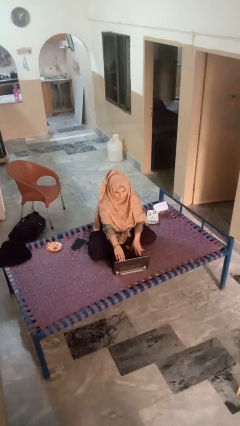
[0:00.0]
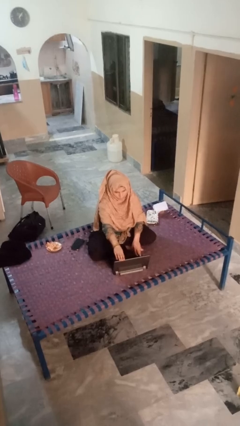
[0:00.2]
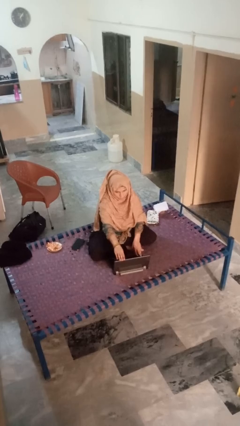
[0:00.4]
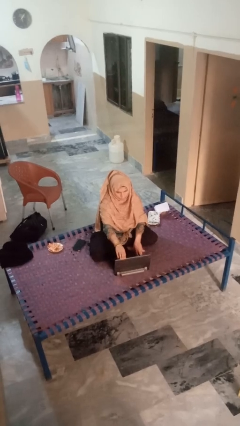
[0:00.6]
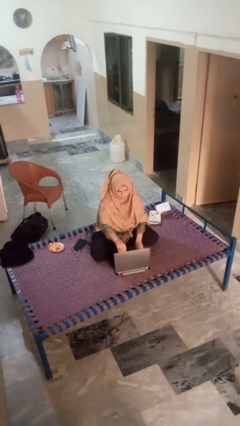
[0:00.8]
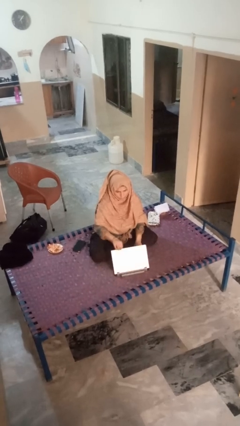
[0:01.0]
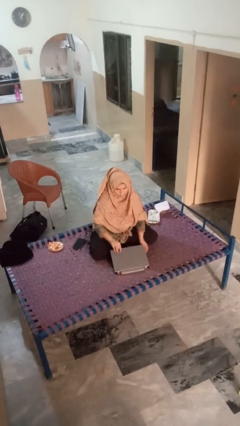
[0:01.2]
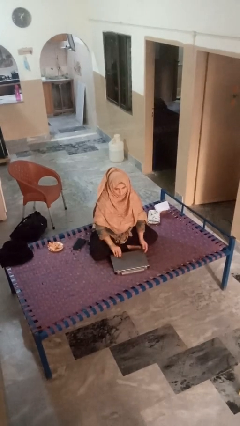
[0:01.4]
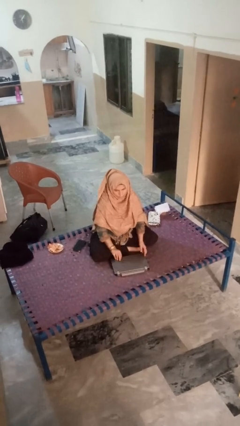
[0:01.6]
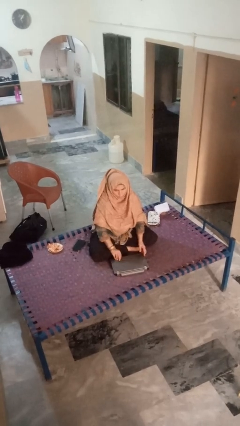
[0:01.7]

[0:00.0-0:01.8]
person closes laptop

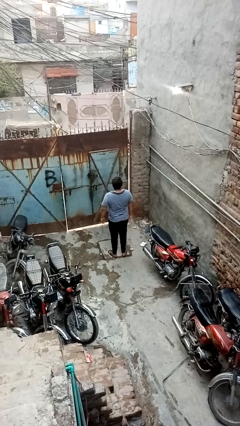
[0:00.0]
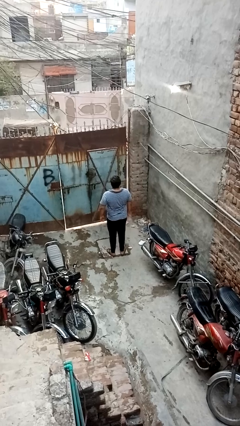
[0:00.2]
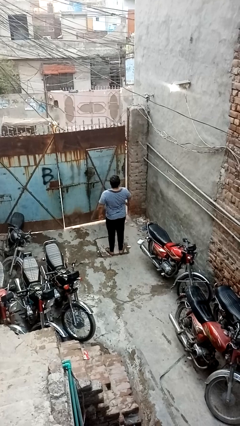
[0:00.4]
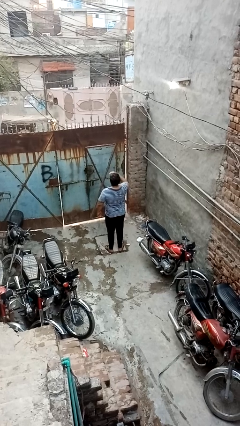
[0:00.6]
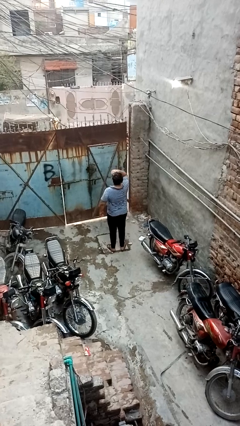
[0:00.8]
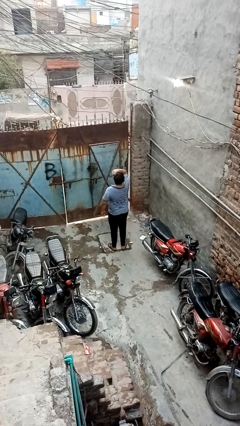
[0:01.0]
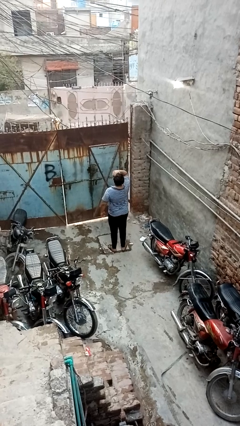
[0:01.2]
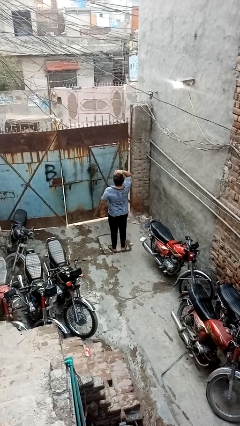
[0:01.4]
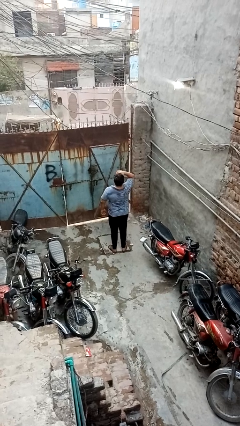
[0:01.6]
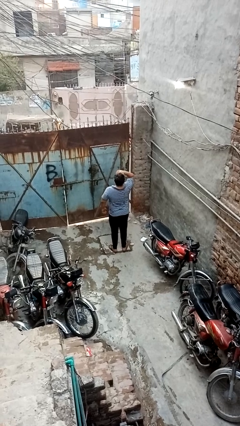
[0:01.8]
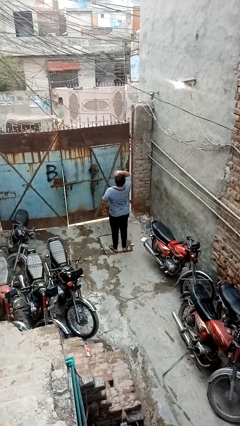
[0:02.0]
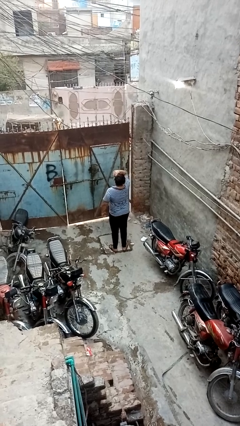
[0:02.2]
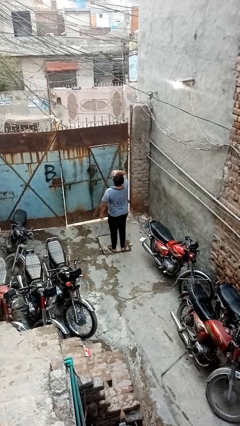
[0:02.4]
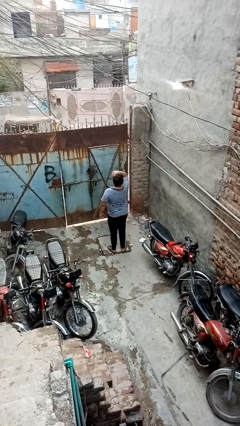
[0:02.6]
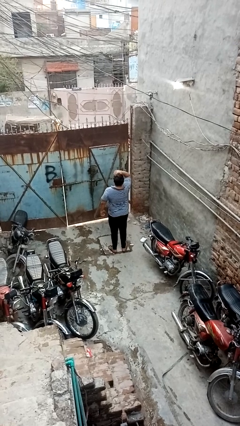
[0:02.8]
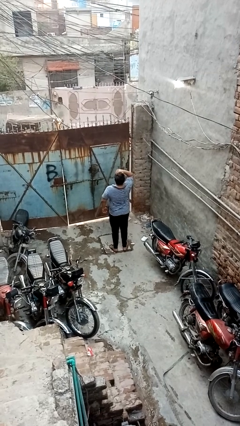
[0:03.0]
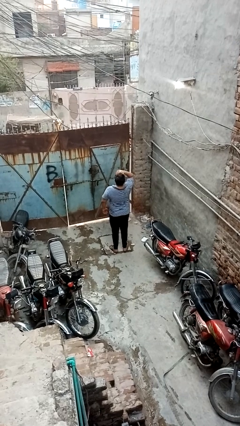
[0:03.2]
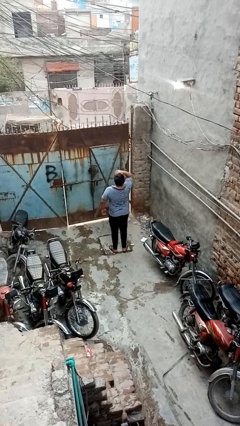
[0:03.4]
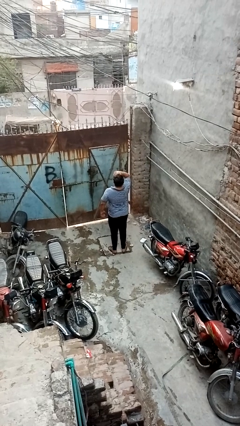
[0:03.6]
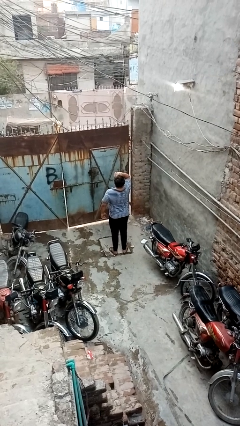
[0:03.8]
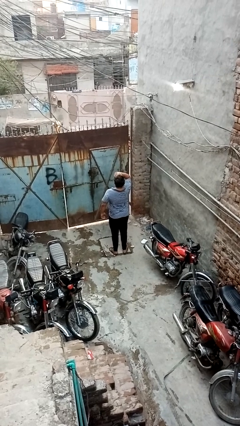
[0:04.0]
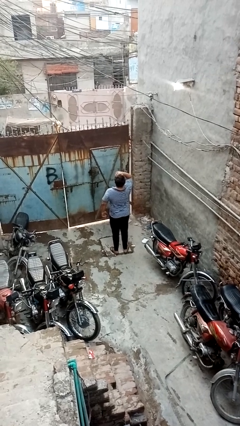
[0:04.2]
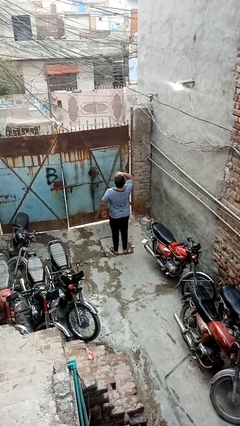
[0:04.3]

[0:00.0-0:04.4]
person shades eyes

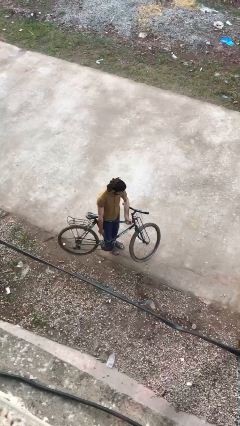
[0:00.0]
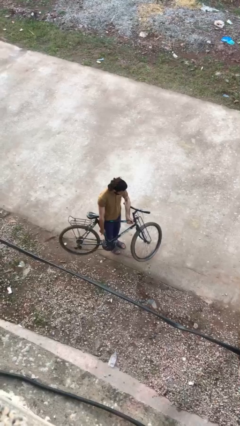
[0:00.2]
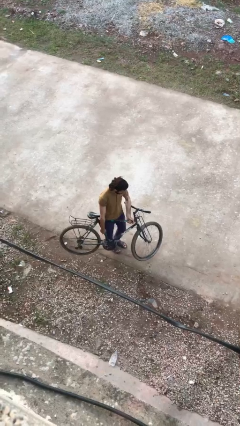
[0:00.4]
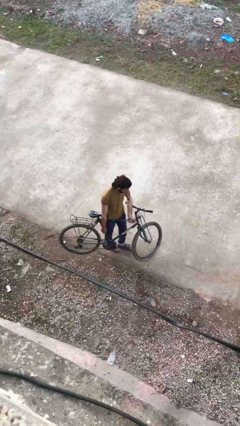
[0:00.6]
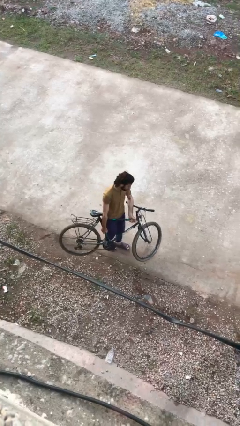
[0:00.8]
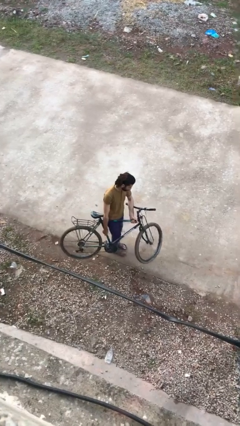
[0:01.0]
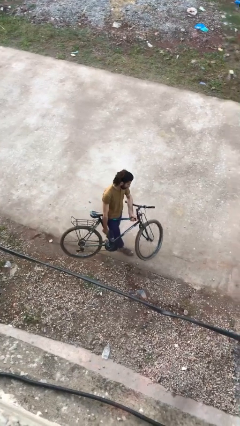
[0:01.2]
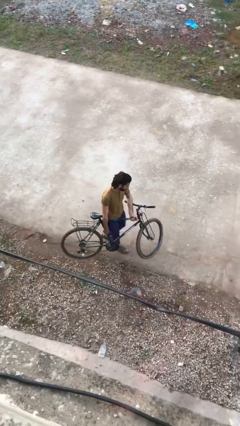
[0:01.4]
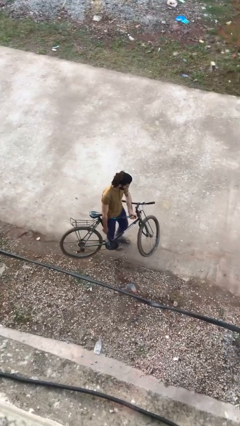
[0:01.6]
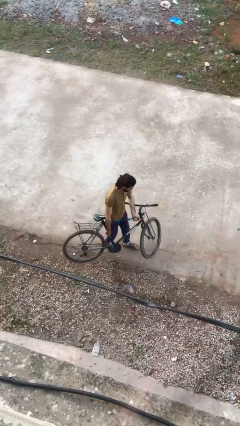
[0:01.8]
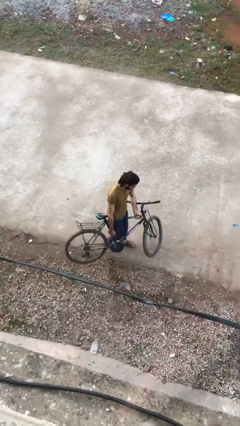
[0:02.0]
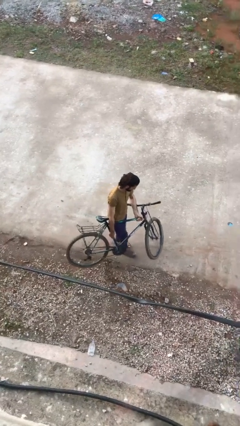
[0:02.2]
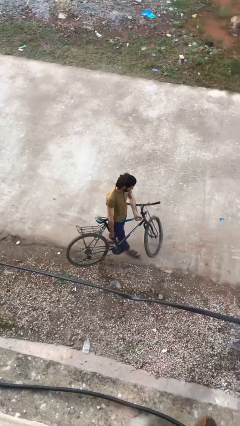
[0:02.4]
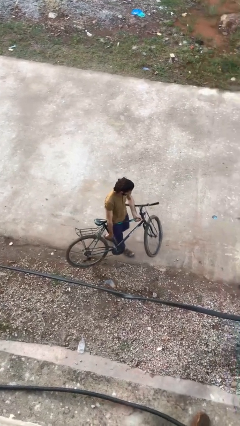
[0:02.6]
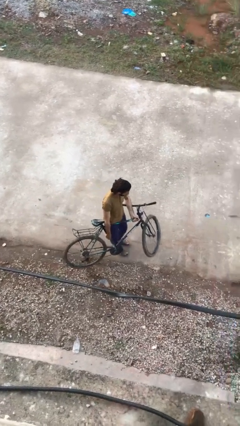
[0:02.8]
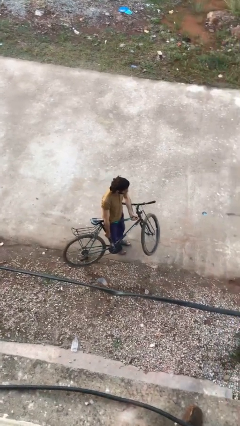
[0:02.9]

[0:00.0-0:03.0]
person carries bicycle

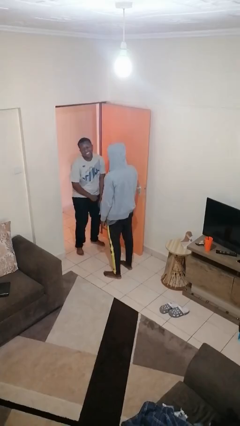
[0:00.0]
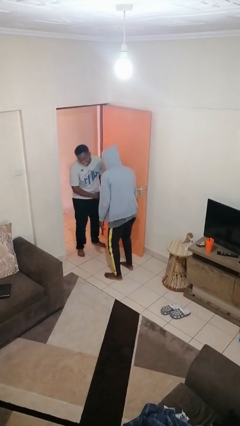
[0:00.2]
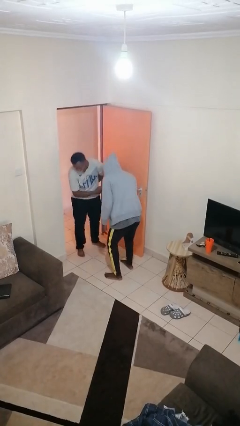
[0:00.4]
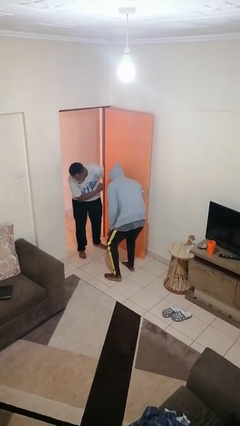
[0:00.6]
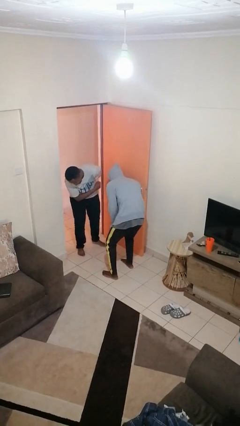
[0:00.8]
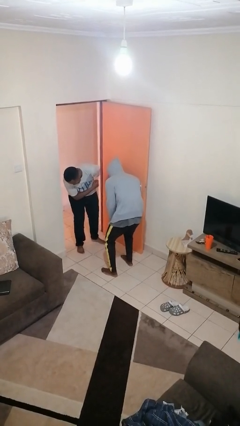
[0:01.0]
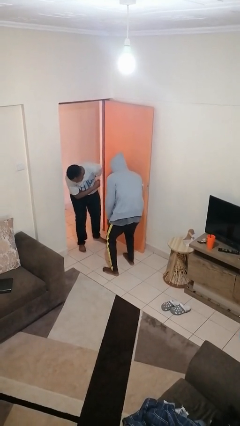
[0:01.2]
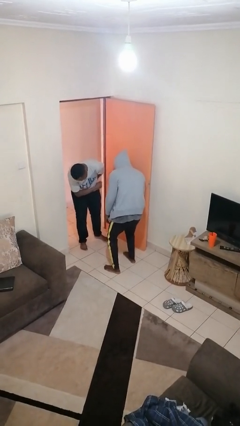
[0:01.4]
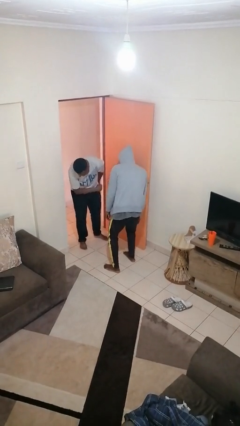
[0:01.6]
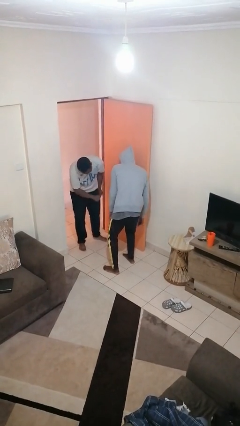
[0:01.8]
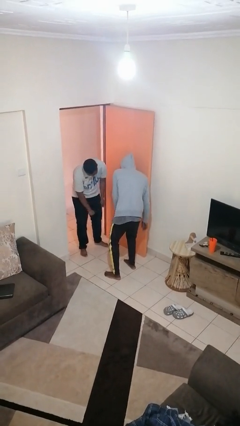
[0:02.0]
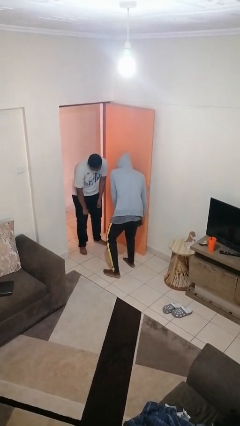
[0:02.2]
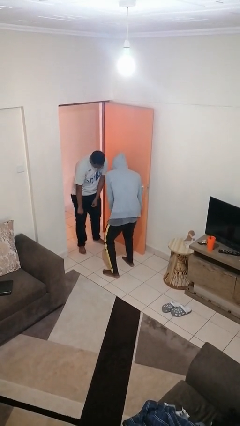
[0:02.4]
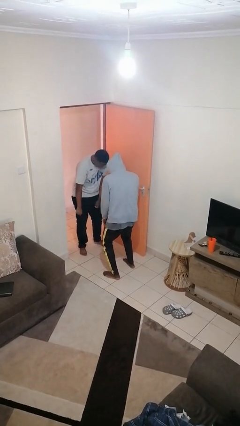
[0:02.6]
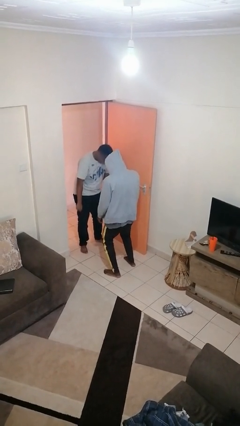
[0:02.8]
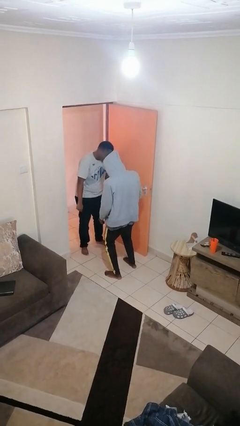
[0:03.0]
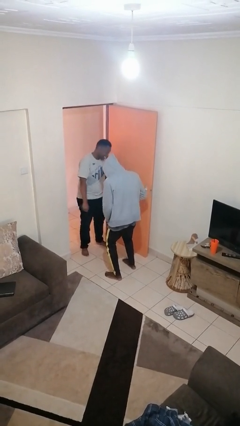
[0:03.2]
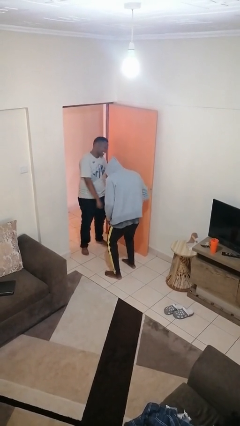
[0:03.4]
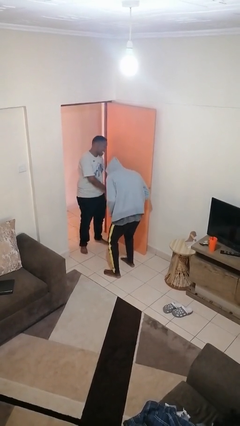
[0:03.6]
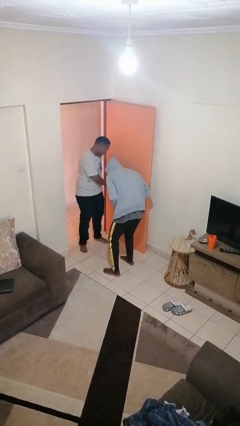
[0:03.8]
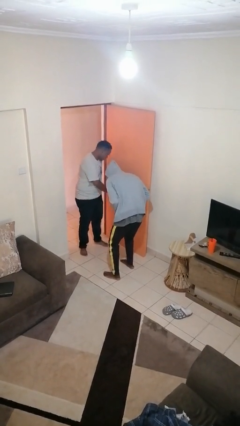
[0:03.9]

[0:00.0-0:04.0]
person laughs with person

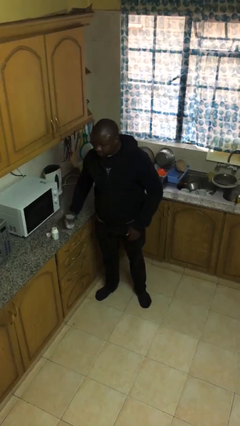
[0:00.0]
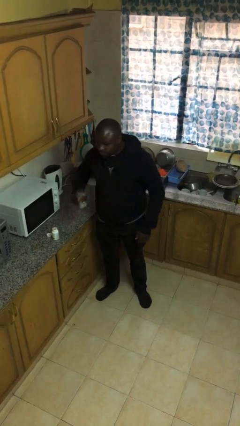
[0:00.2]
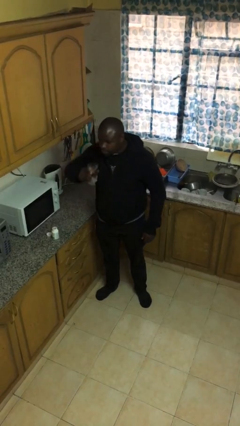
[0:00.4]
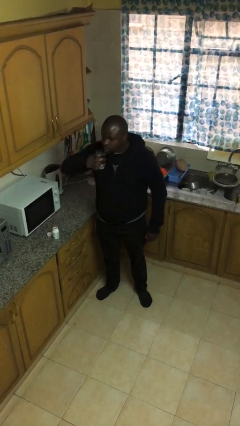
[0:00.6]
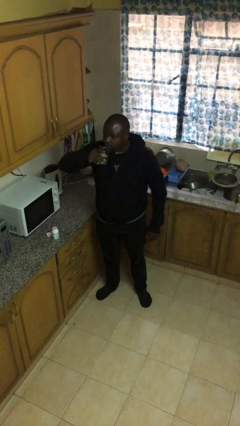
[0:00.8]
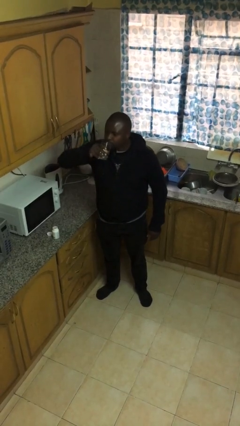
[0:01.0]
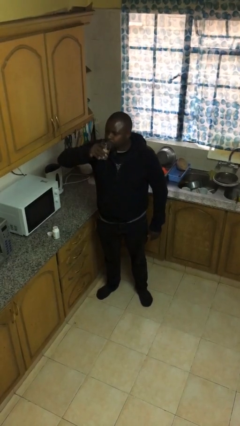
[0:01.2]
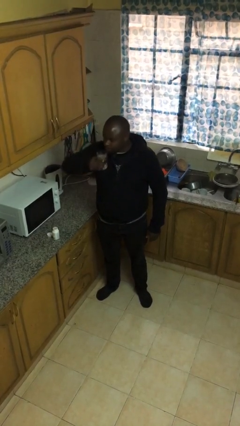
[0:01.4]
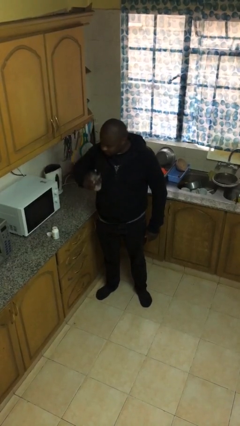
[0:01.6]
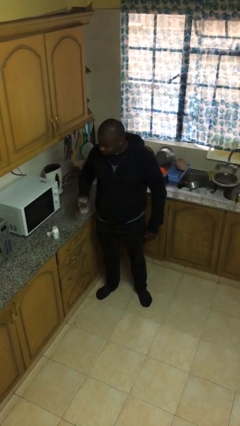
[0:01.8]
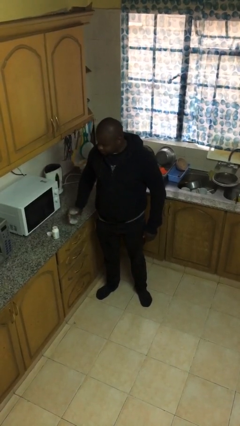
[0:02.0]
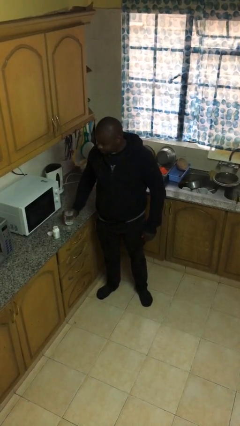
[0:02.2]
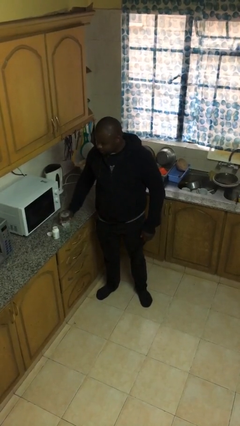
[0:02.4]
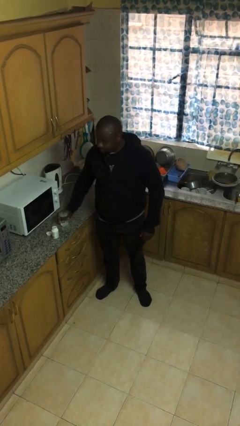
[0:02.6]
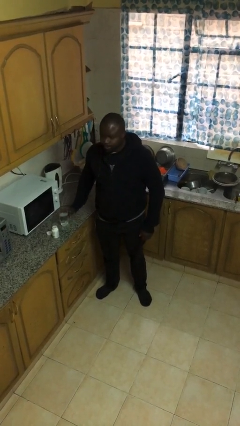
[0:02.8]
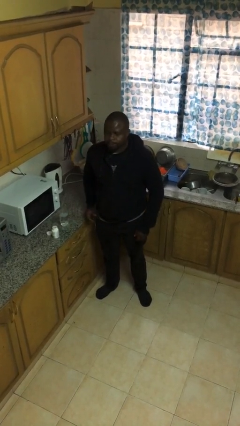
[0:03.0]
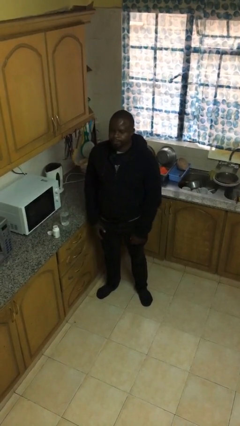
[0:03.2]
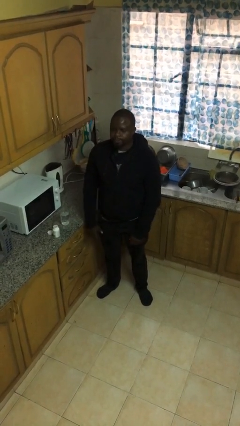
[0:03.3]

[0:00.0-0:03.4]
person drinks from cup

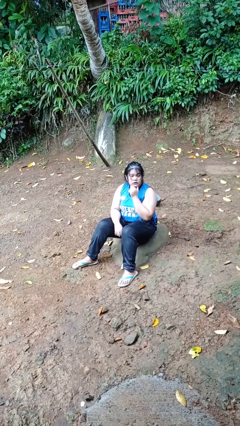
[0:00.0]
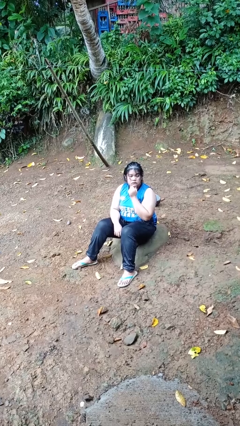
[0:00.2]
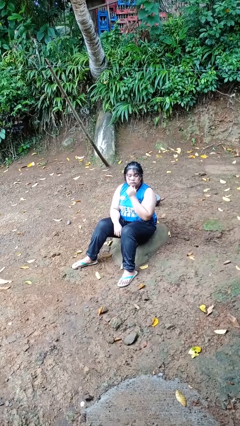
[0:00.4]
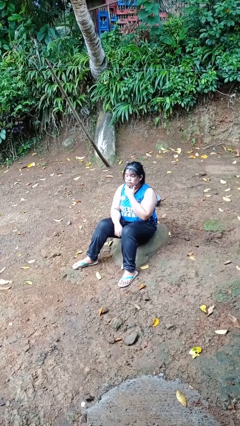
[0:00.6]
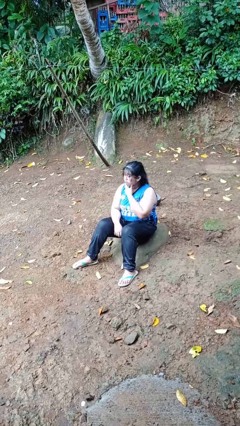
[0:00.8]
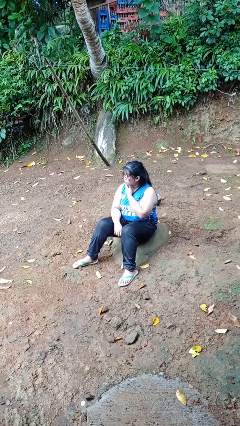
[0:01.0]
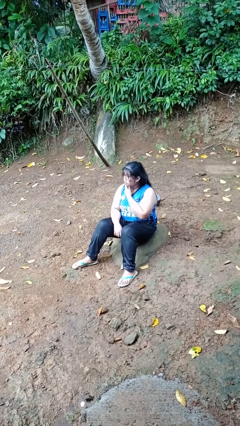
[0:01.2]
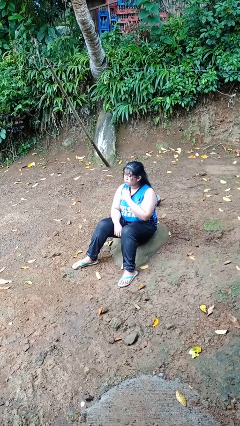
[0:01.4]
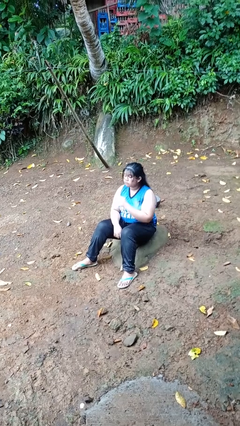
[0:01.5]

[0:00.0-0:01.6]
person strokes chin
